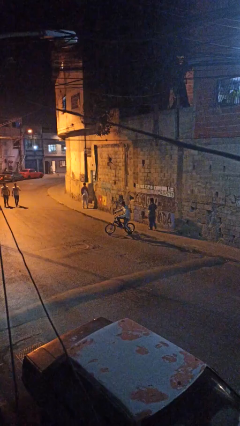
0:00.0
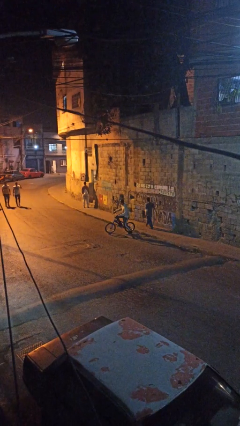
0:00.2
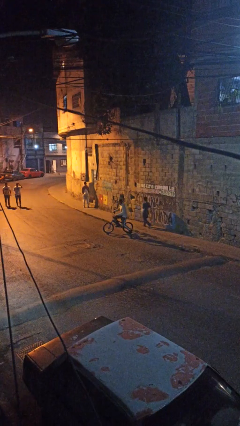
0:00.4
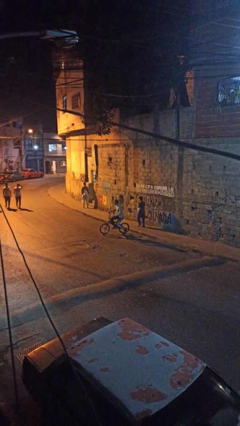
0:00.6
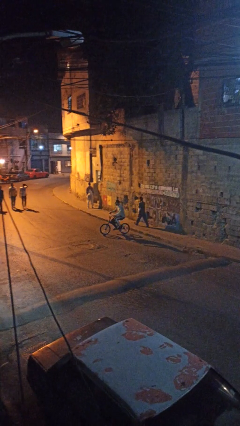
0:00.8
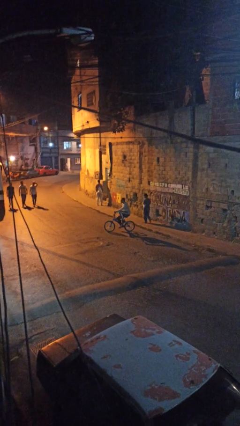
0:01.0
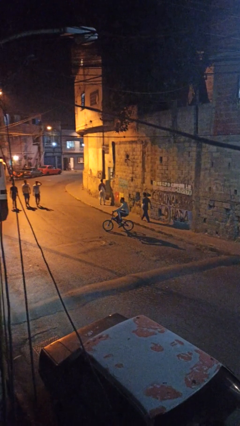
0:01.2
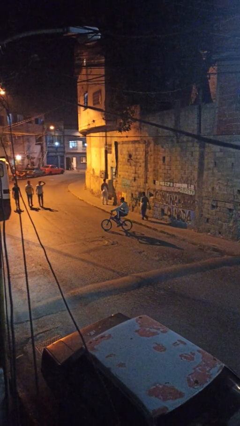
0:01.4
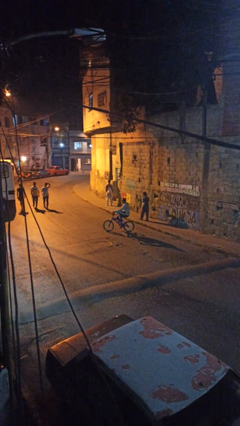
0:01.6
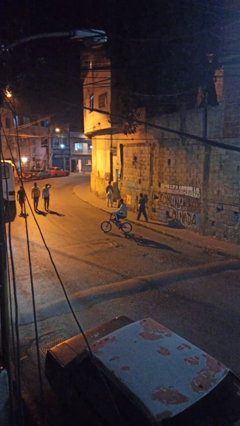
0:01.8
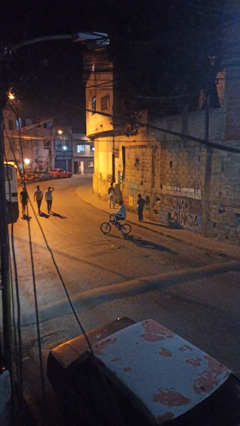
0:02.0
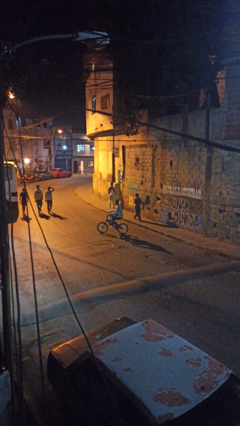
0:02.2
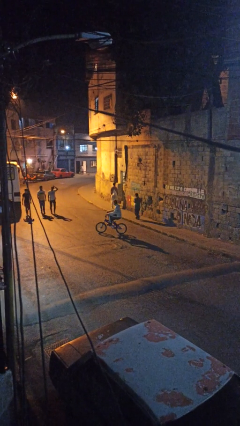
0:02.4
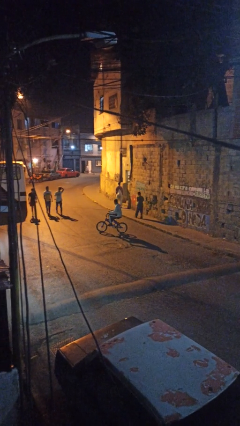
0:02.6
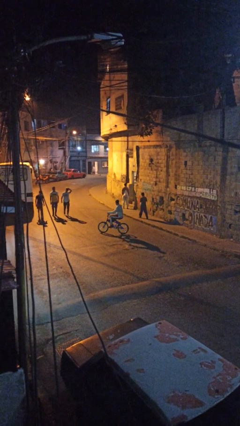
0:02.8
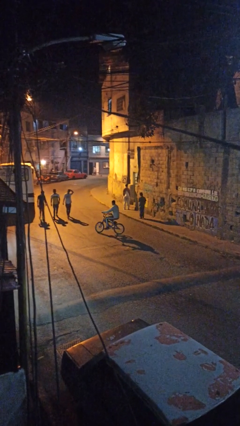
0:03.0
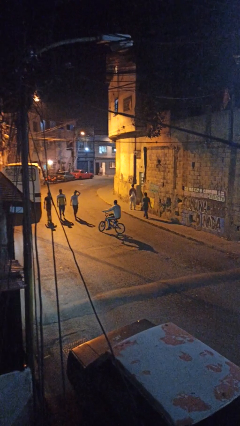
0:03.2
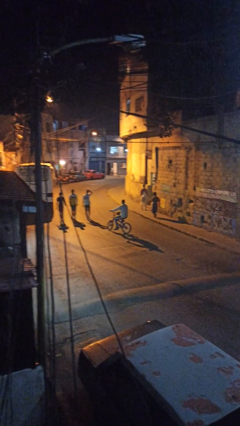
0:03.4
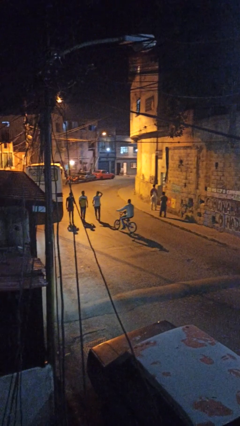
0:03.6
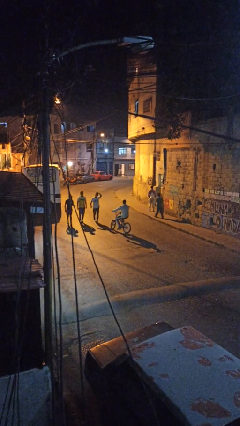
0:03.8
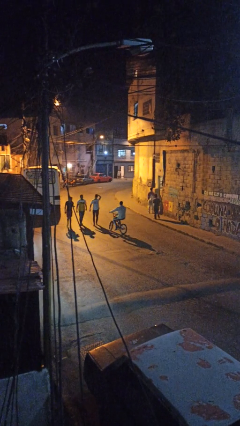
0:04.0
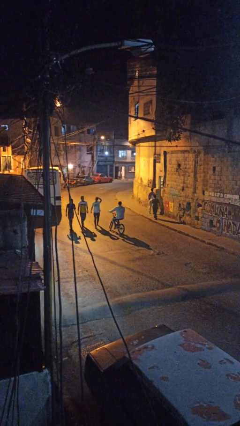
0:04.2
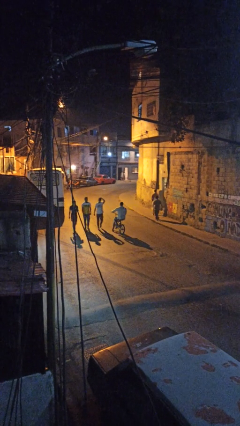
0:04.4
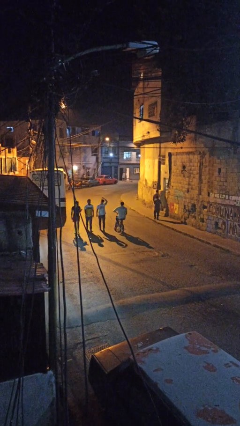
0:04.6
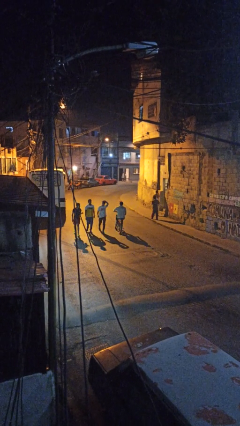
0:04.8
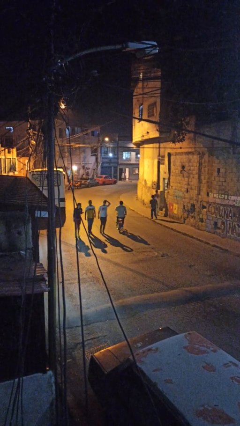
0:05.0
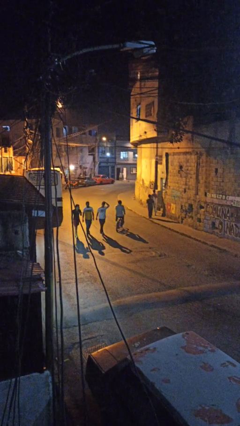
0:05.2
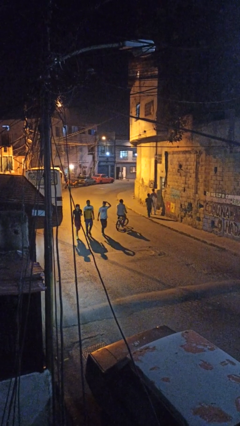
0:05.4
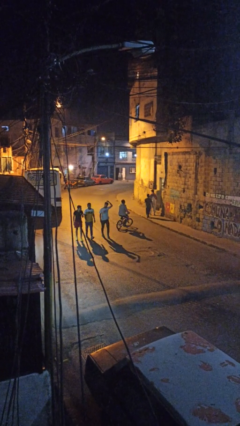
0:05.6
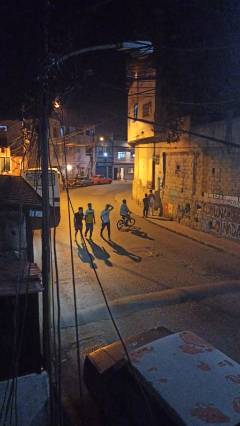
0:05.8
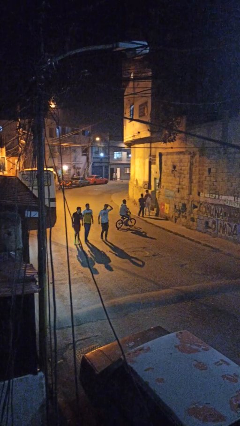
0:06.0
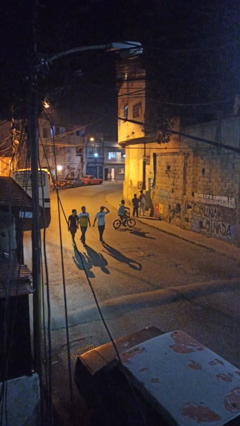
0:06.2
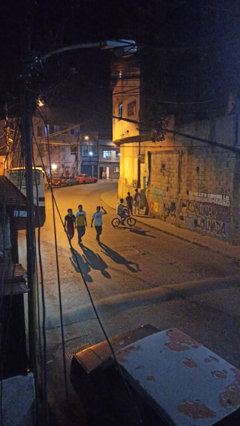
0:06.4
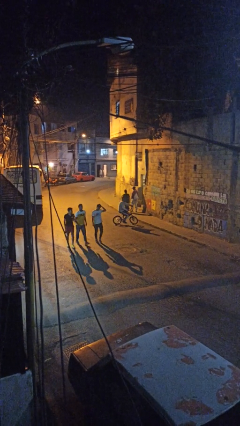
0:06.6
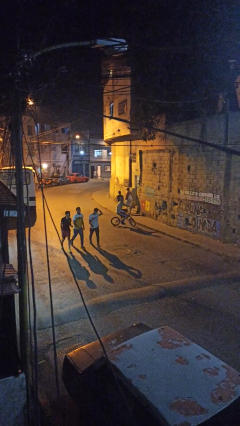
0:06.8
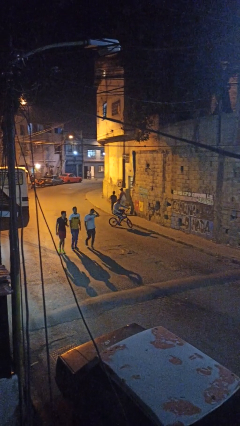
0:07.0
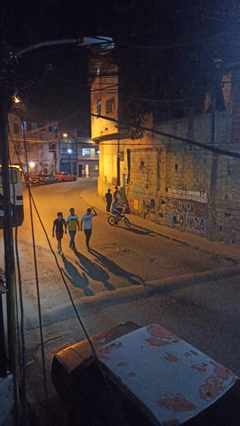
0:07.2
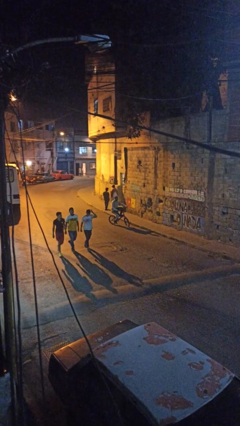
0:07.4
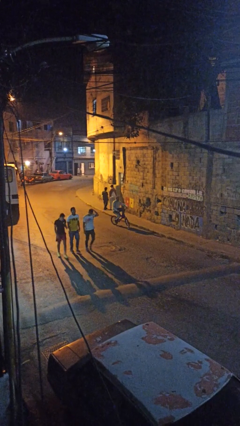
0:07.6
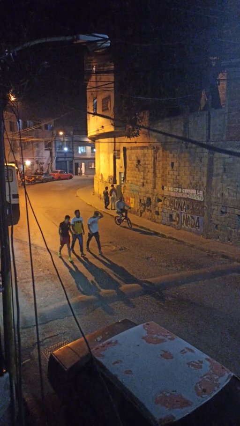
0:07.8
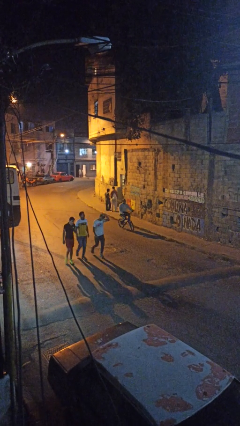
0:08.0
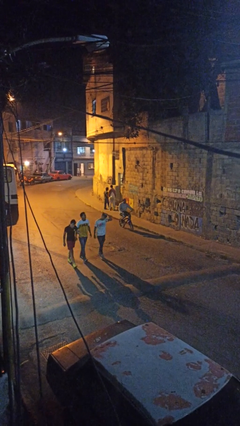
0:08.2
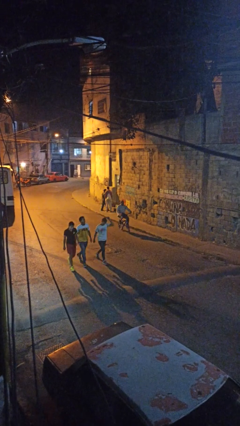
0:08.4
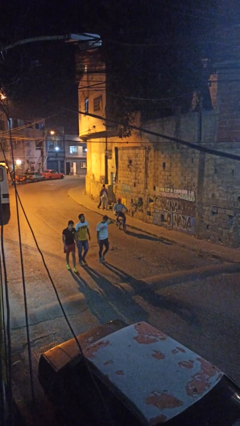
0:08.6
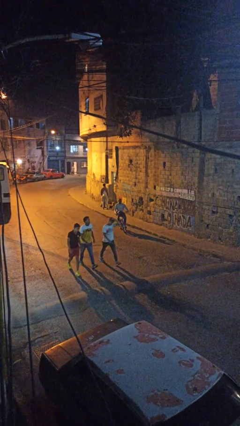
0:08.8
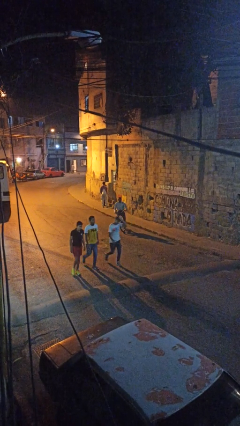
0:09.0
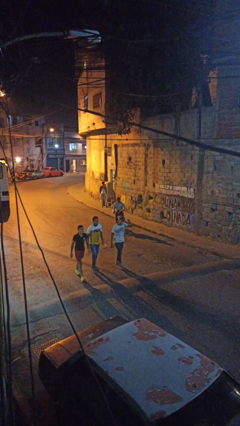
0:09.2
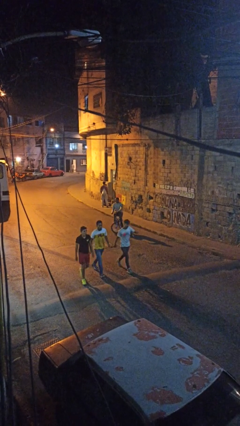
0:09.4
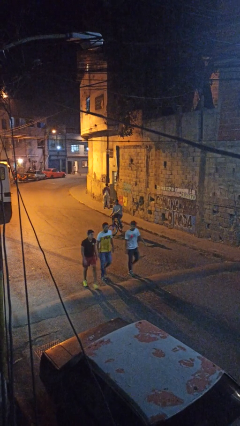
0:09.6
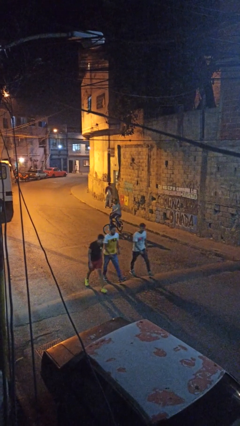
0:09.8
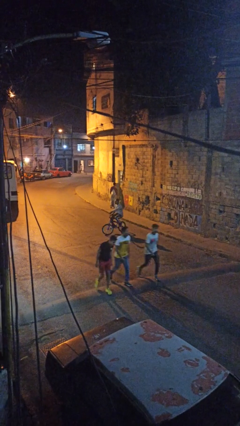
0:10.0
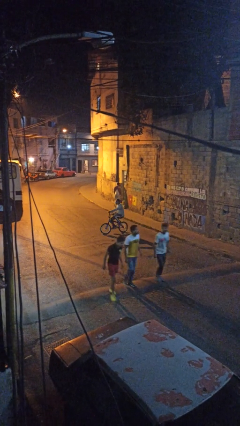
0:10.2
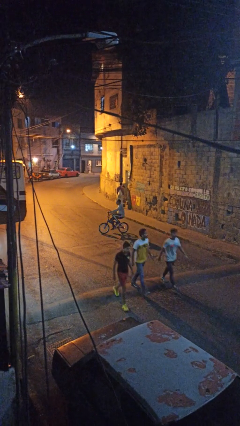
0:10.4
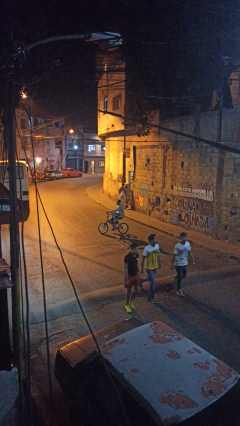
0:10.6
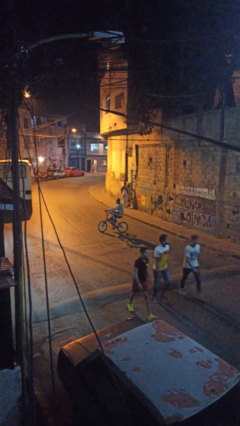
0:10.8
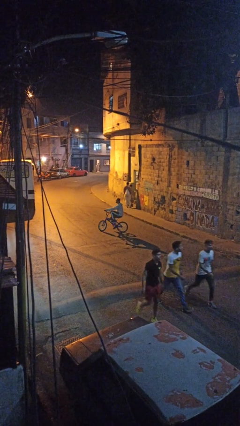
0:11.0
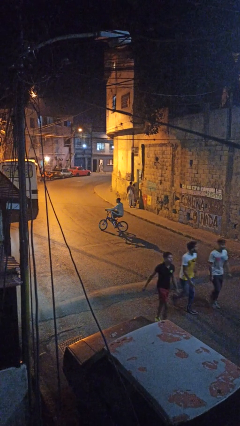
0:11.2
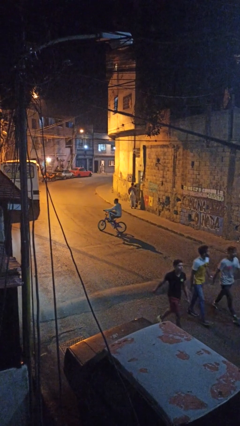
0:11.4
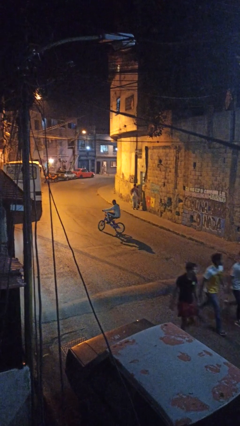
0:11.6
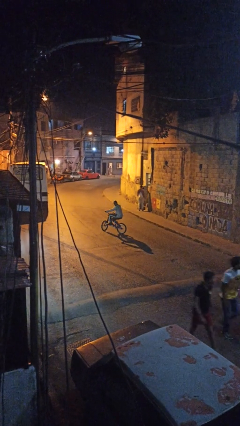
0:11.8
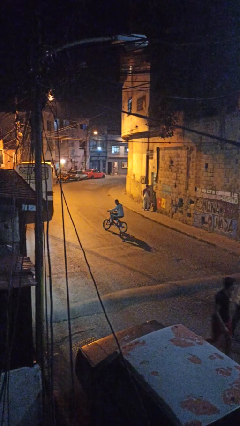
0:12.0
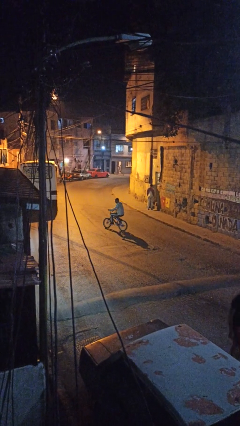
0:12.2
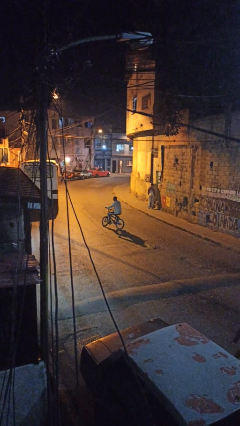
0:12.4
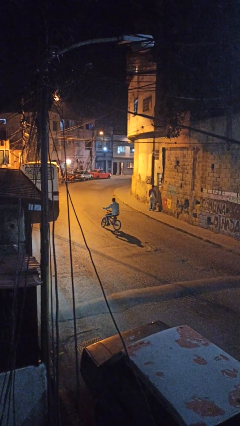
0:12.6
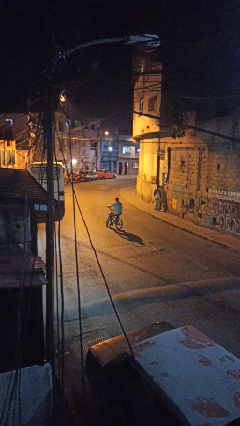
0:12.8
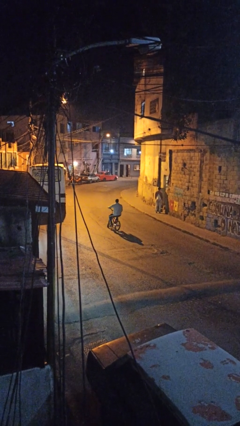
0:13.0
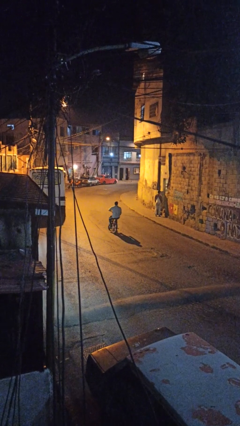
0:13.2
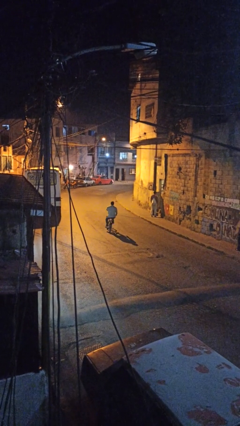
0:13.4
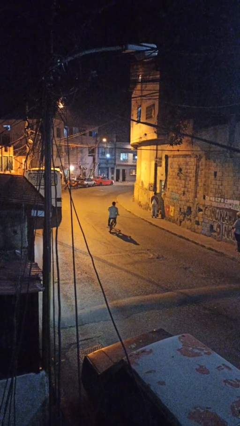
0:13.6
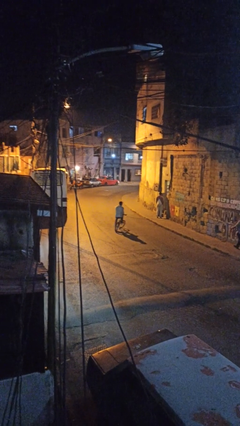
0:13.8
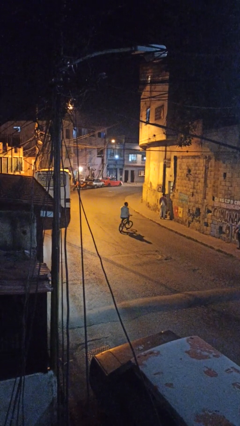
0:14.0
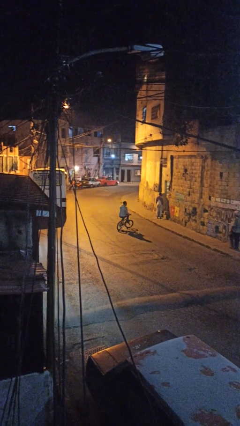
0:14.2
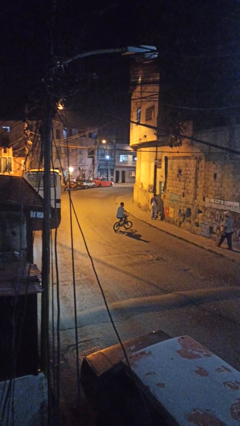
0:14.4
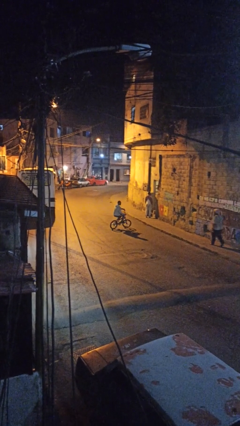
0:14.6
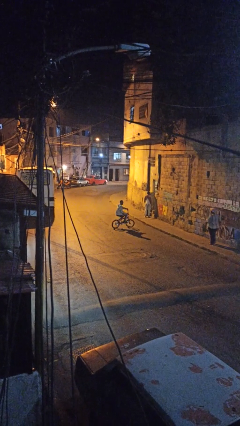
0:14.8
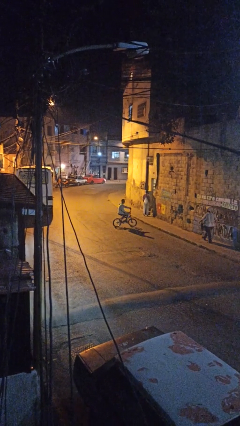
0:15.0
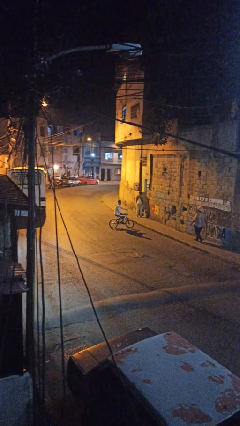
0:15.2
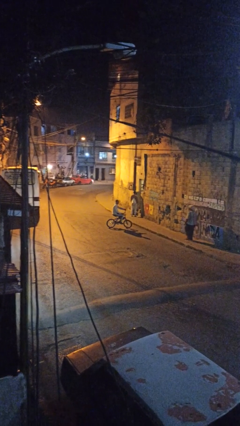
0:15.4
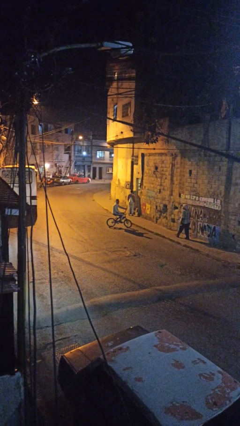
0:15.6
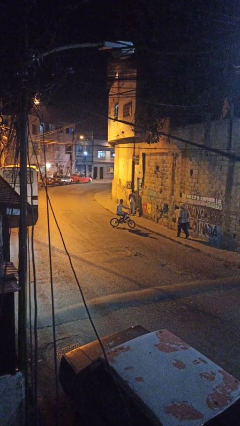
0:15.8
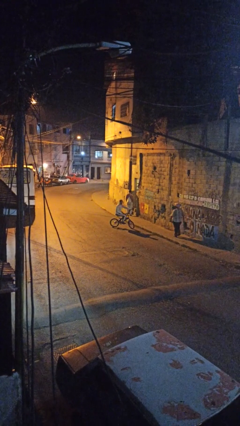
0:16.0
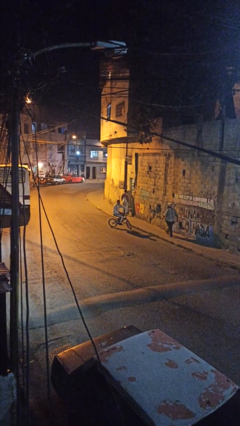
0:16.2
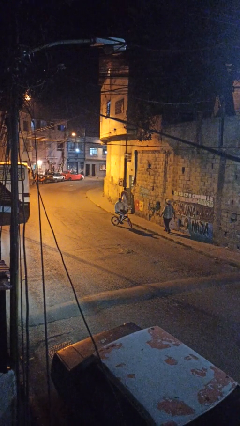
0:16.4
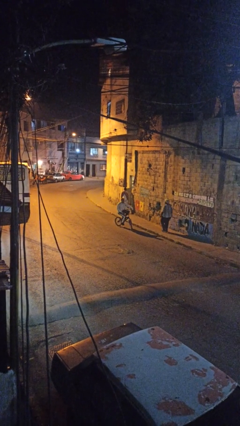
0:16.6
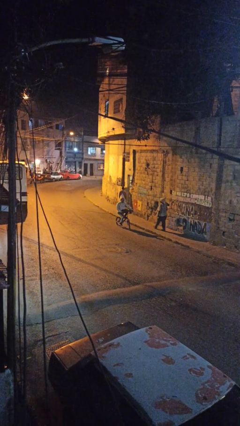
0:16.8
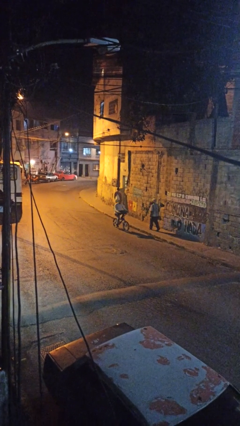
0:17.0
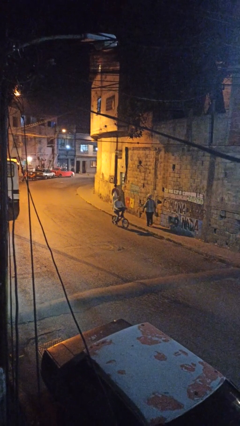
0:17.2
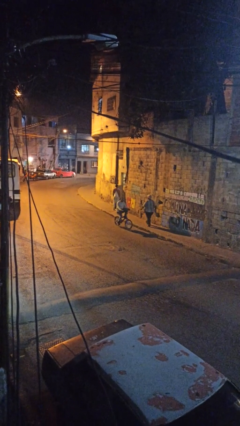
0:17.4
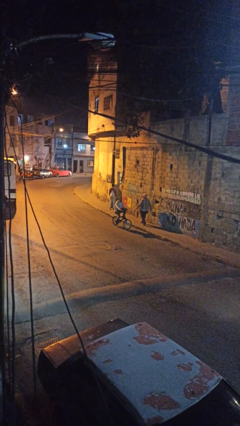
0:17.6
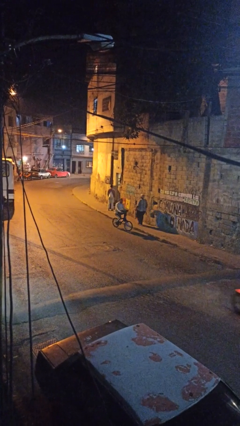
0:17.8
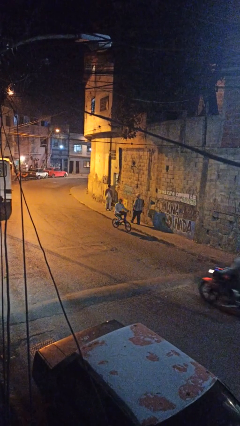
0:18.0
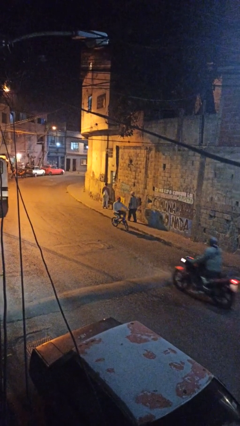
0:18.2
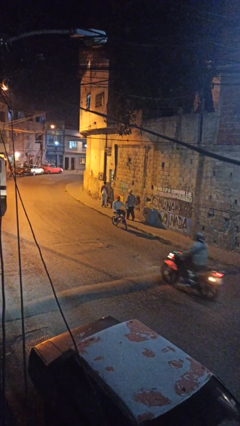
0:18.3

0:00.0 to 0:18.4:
person rides bicycle
